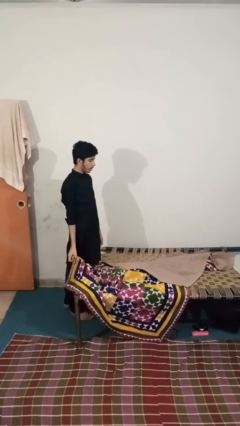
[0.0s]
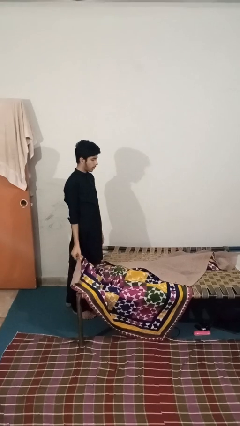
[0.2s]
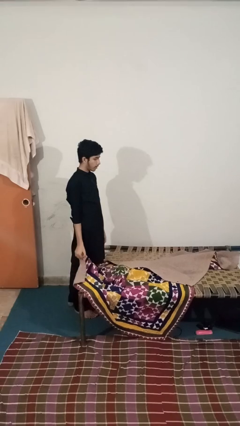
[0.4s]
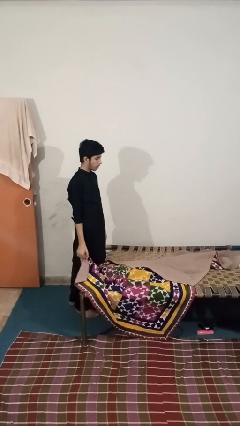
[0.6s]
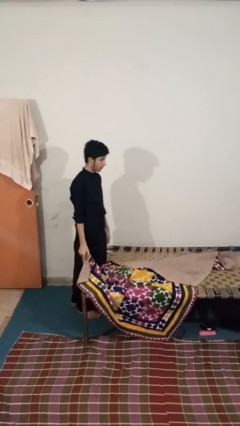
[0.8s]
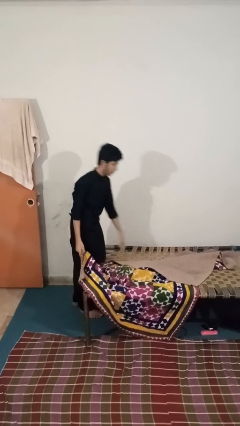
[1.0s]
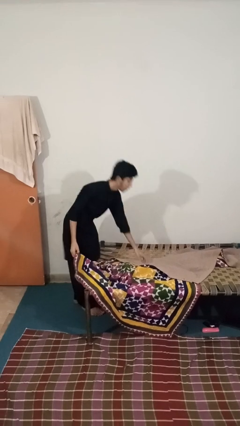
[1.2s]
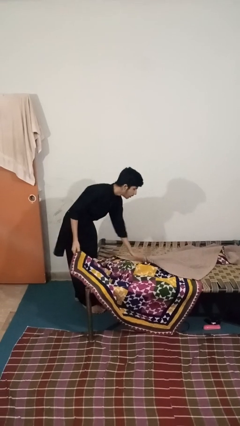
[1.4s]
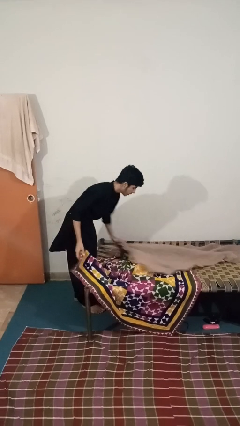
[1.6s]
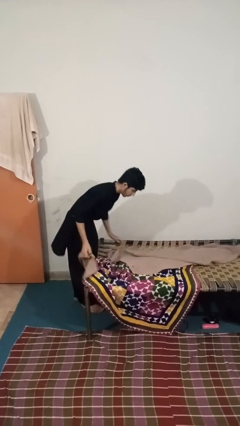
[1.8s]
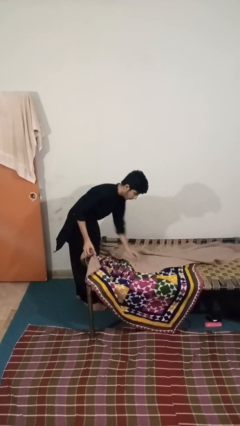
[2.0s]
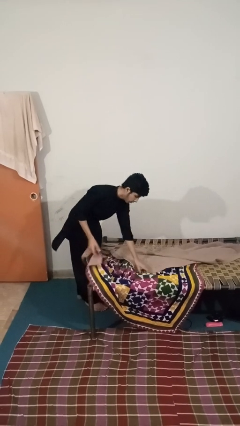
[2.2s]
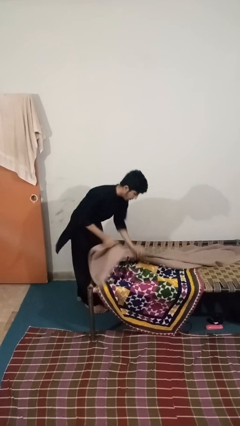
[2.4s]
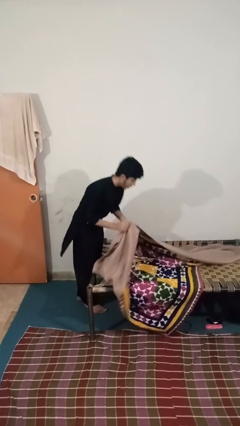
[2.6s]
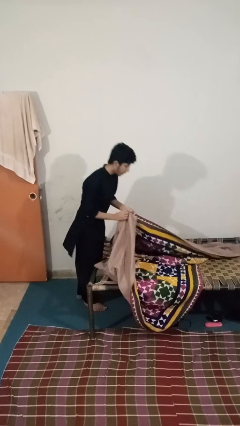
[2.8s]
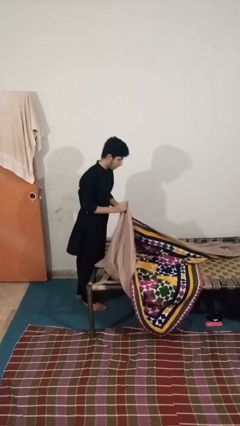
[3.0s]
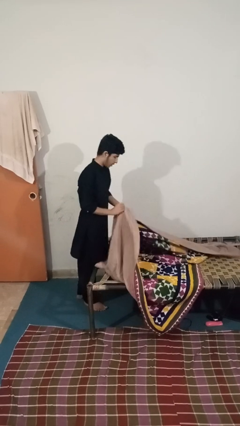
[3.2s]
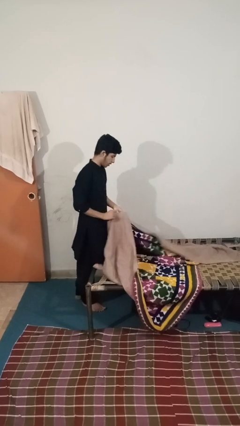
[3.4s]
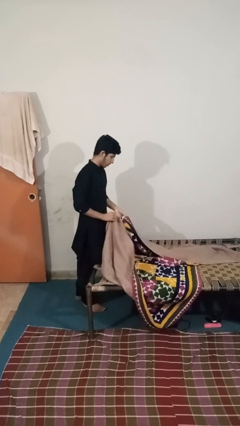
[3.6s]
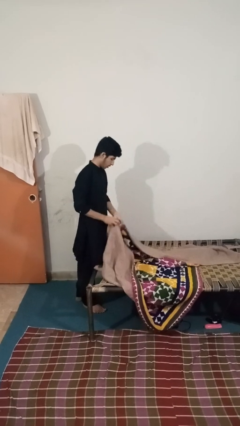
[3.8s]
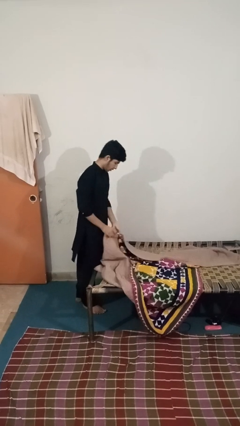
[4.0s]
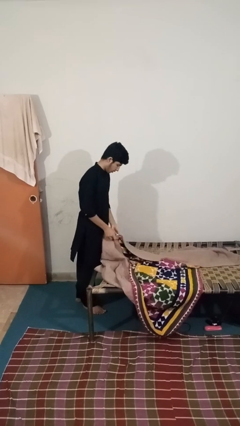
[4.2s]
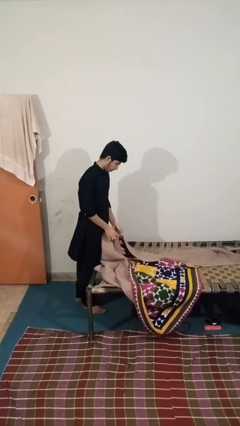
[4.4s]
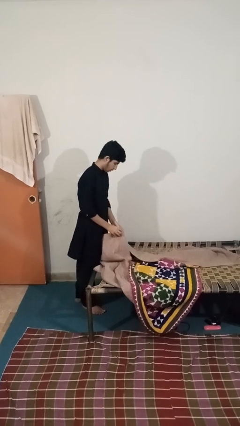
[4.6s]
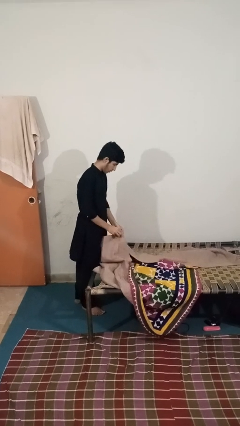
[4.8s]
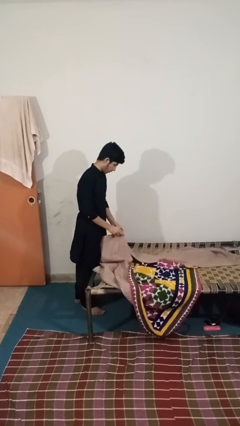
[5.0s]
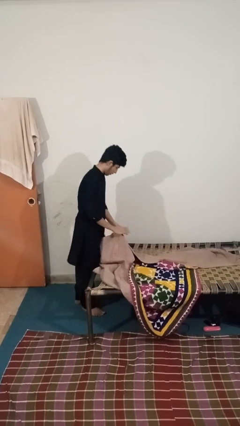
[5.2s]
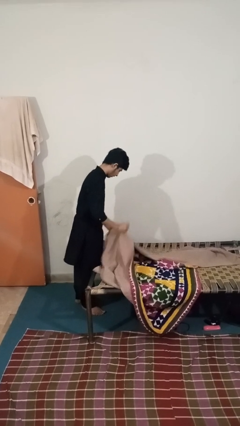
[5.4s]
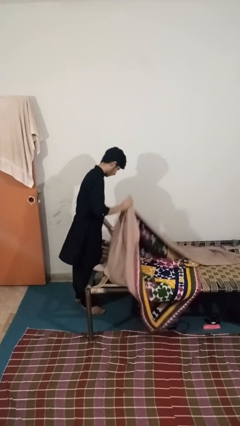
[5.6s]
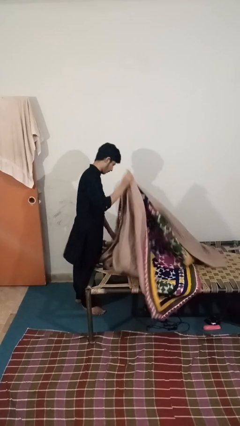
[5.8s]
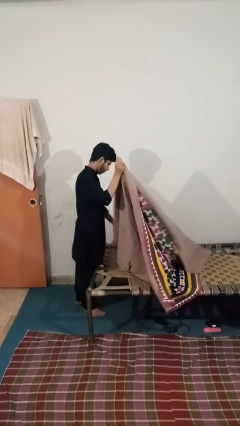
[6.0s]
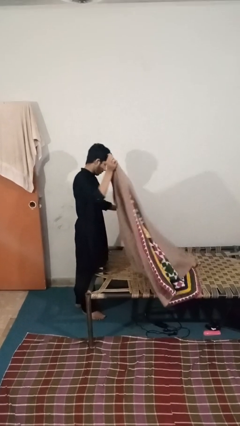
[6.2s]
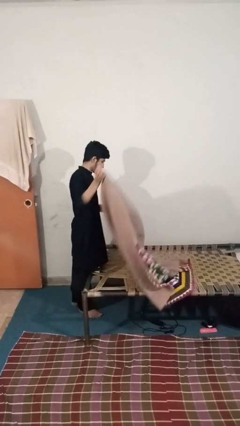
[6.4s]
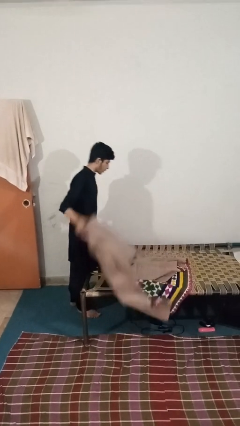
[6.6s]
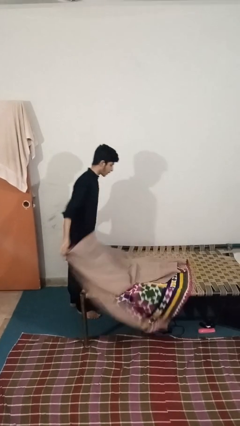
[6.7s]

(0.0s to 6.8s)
person folds blanket

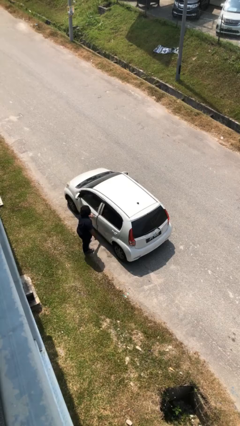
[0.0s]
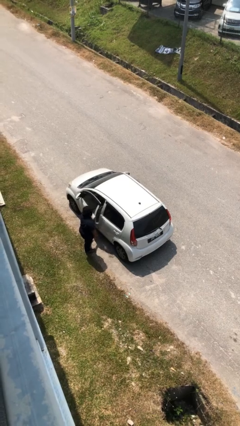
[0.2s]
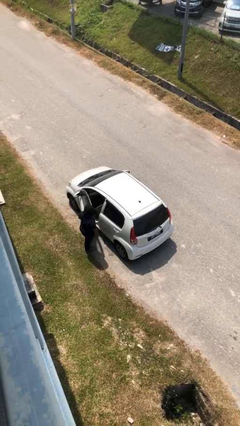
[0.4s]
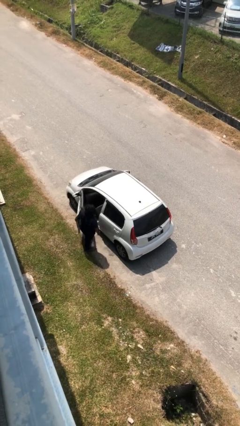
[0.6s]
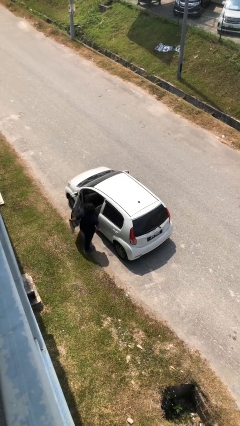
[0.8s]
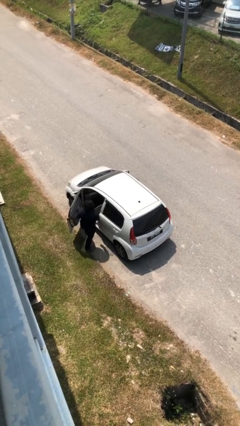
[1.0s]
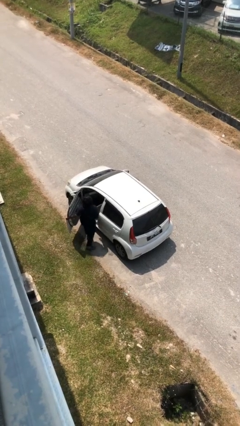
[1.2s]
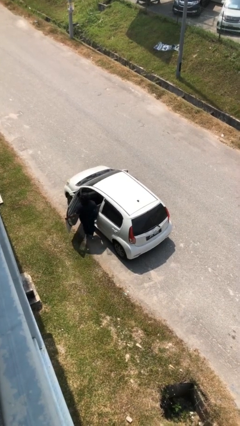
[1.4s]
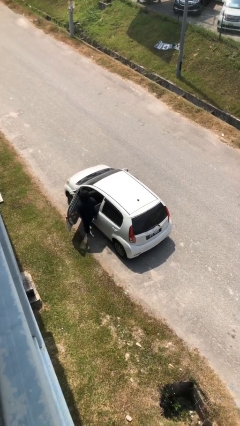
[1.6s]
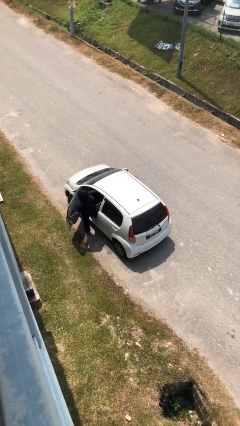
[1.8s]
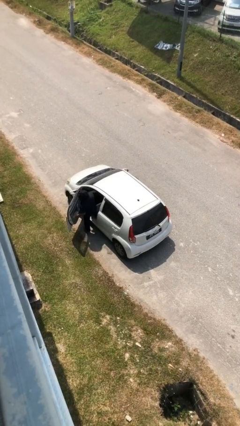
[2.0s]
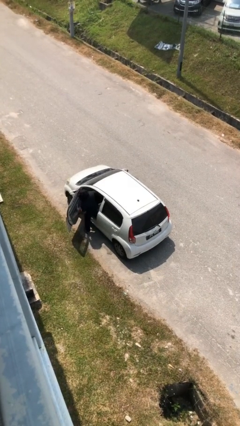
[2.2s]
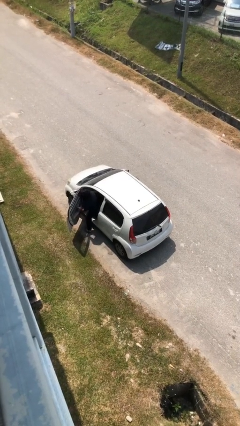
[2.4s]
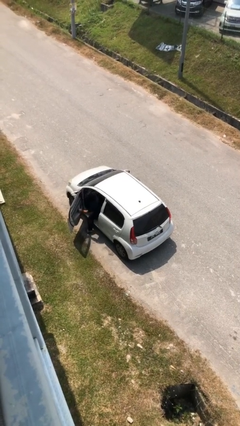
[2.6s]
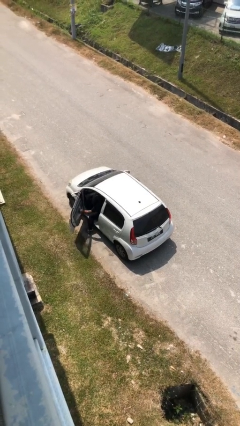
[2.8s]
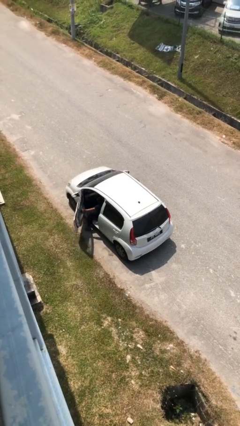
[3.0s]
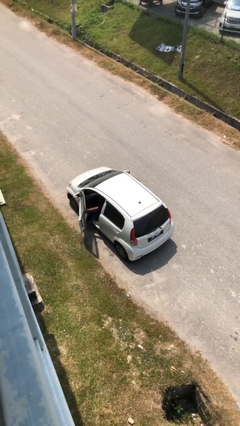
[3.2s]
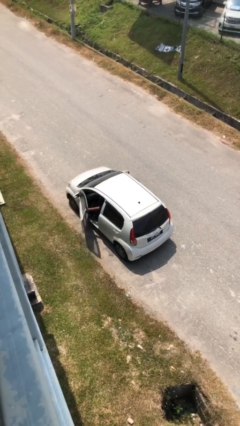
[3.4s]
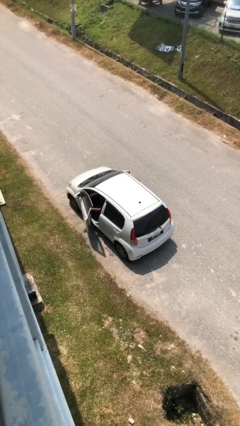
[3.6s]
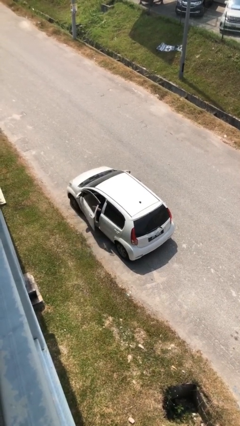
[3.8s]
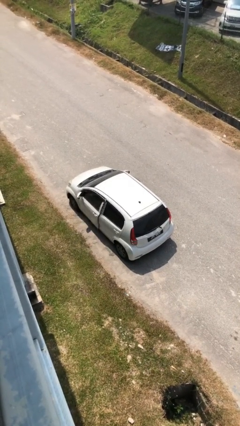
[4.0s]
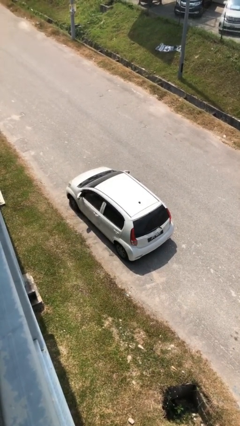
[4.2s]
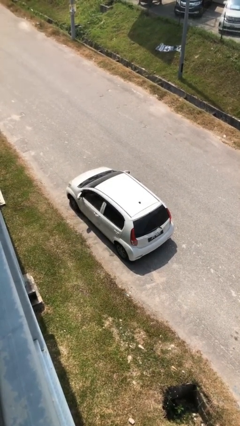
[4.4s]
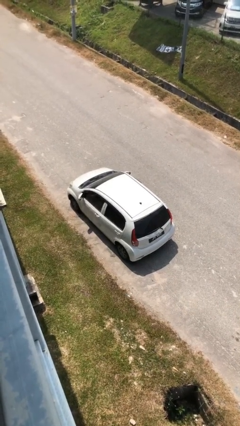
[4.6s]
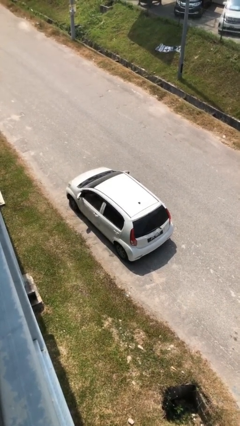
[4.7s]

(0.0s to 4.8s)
car picks up person

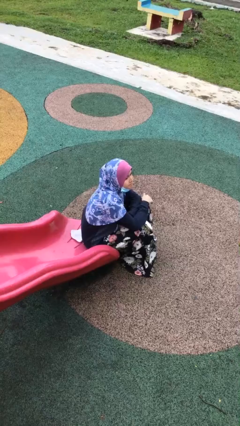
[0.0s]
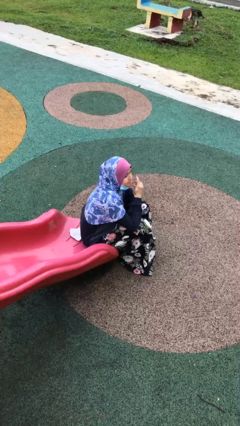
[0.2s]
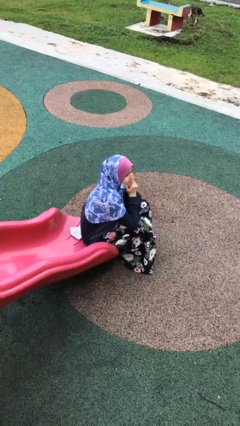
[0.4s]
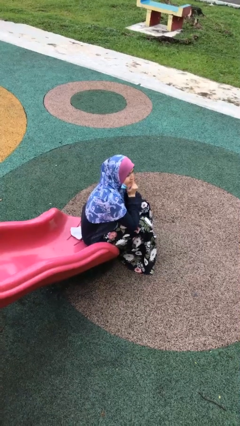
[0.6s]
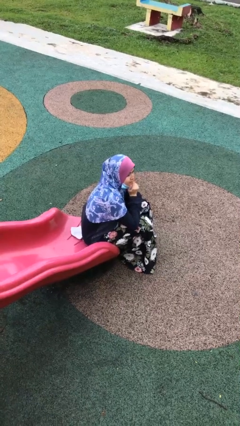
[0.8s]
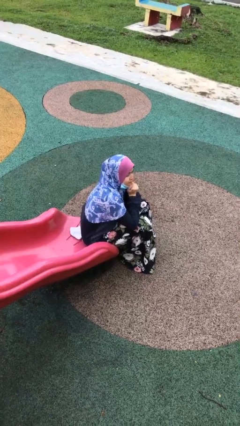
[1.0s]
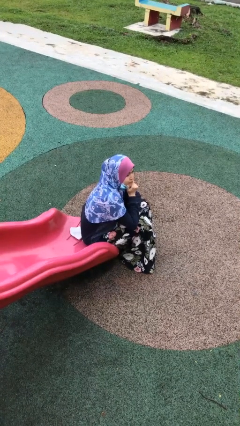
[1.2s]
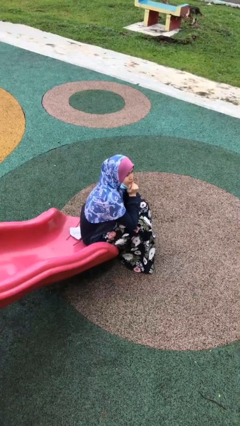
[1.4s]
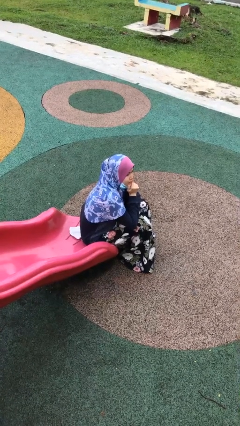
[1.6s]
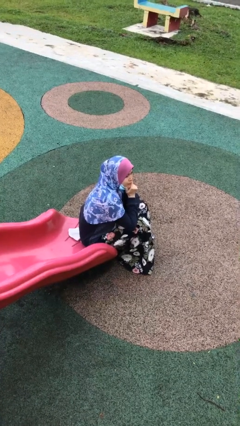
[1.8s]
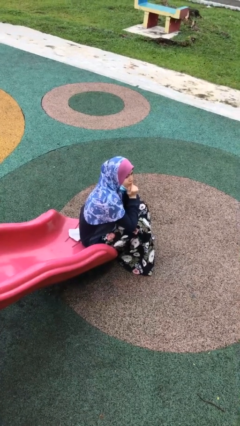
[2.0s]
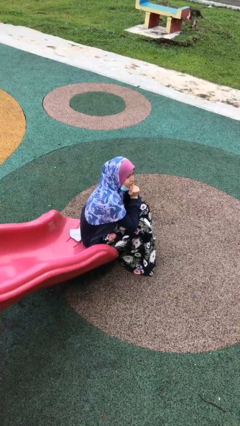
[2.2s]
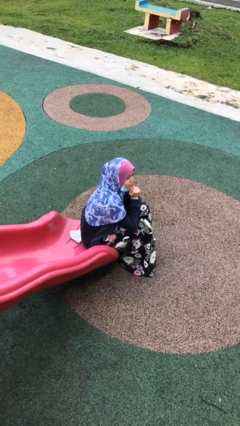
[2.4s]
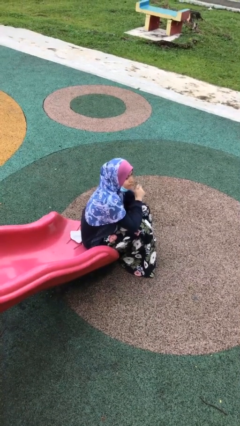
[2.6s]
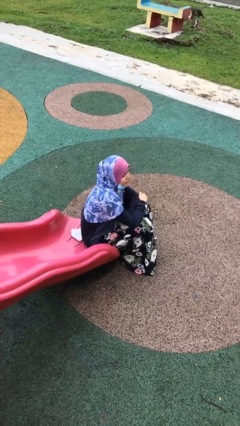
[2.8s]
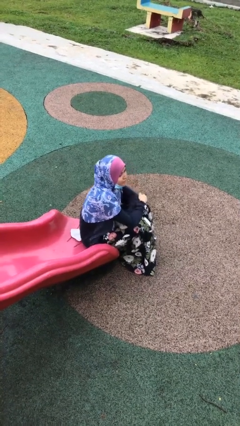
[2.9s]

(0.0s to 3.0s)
person strokes chin

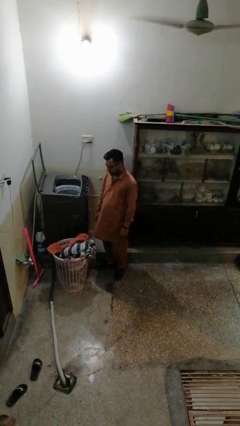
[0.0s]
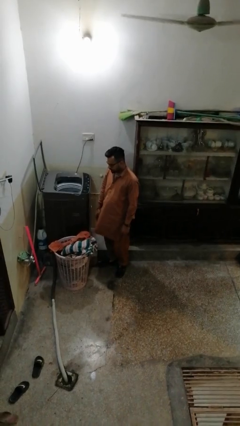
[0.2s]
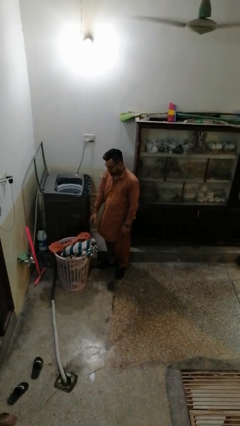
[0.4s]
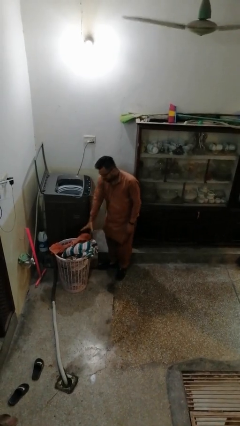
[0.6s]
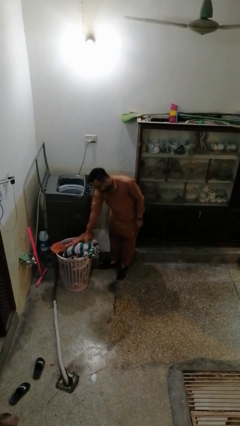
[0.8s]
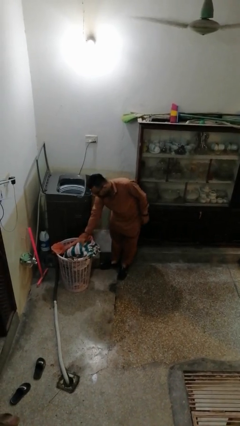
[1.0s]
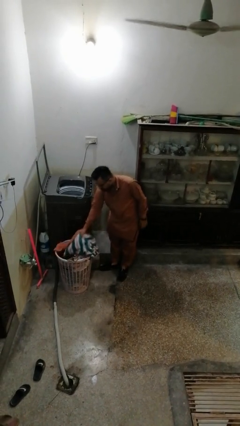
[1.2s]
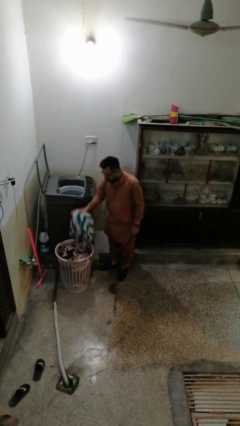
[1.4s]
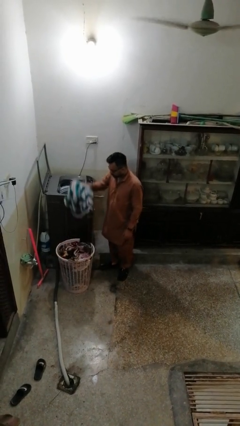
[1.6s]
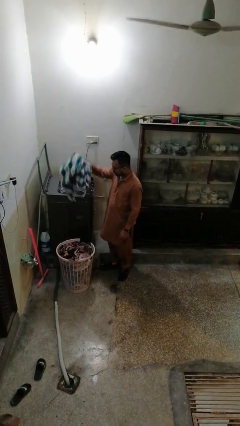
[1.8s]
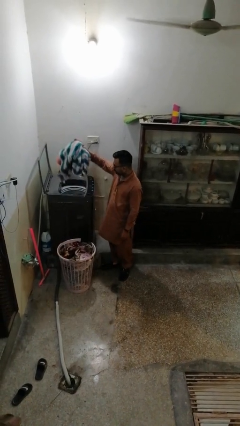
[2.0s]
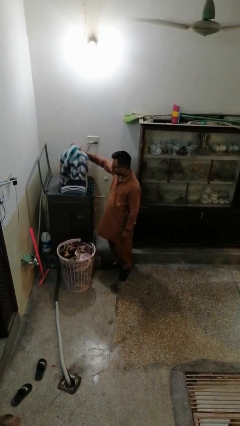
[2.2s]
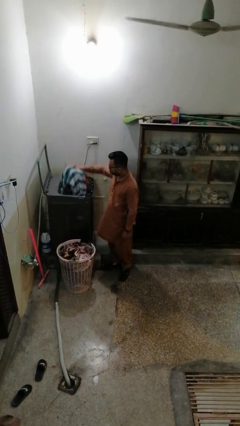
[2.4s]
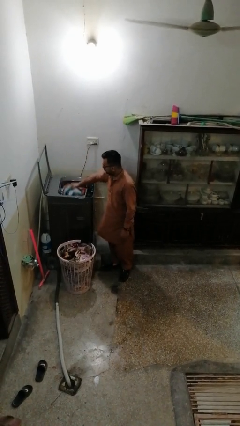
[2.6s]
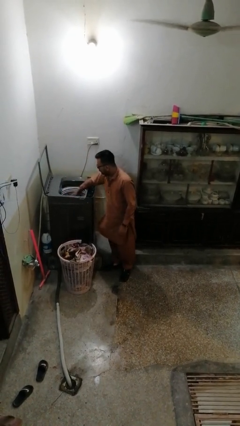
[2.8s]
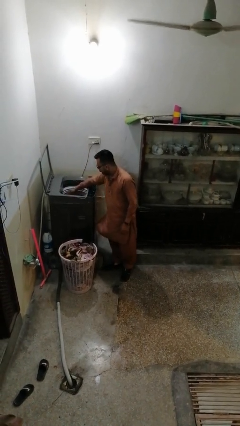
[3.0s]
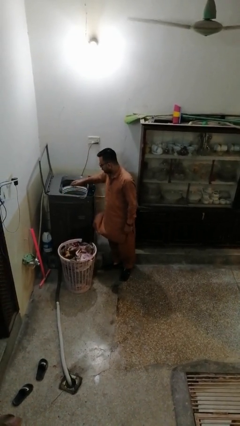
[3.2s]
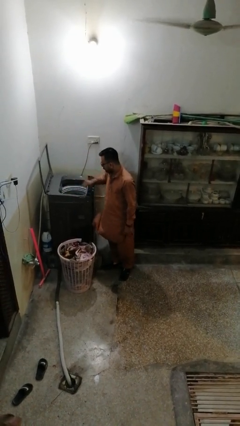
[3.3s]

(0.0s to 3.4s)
person loads clotheswasher

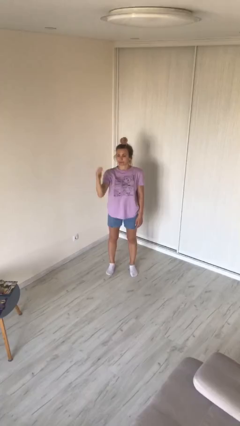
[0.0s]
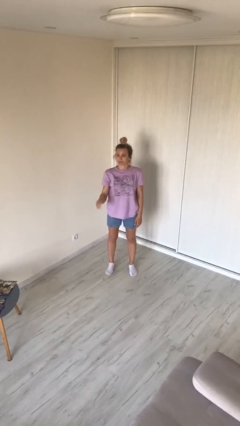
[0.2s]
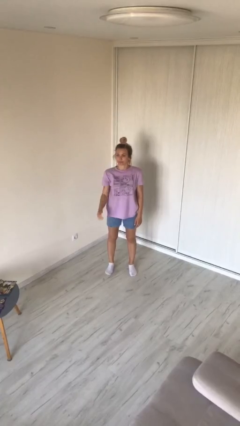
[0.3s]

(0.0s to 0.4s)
person gestures lower hand
